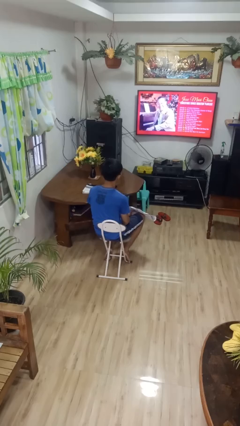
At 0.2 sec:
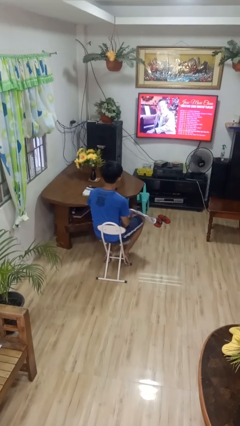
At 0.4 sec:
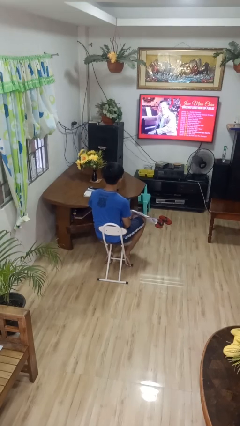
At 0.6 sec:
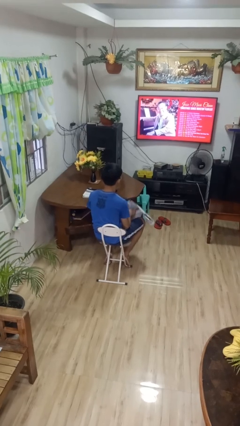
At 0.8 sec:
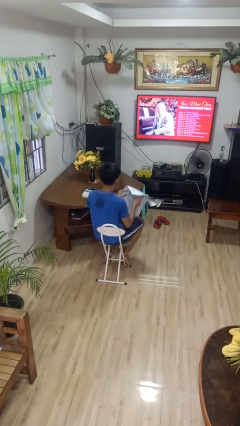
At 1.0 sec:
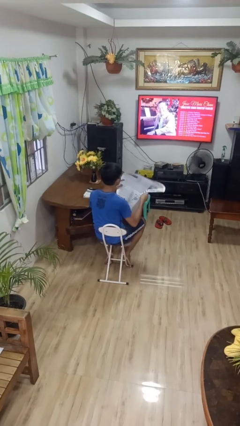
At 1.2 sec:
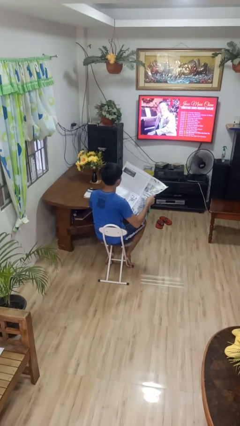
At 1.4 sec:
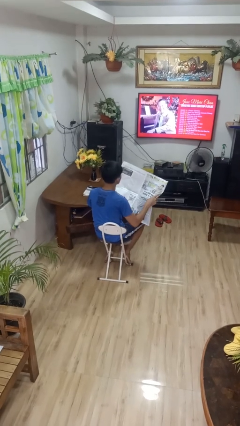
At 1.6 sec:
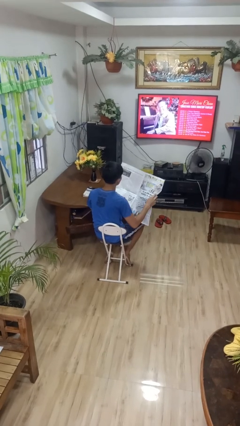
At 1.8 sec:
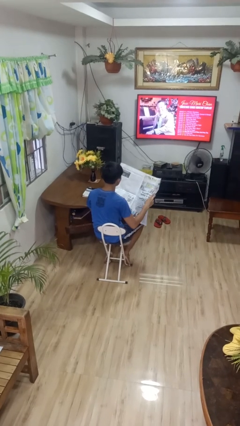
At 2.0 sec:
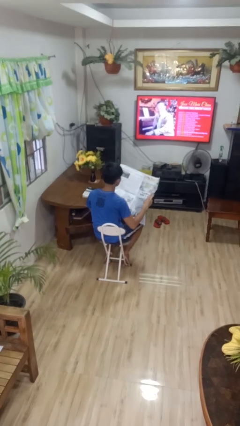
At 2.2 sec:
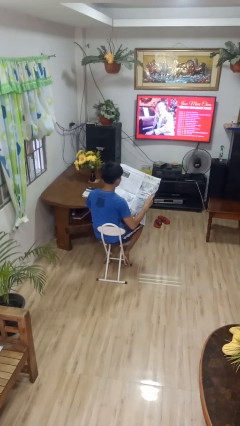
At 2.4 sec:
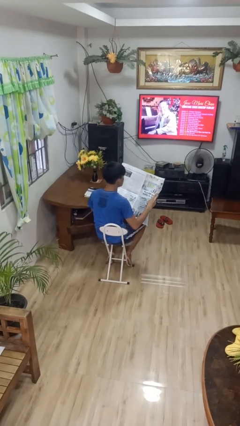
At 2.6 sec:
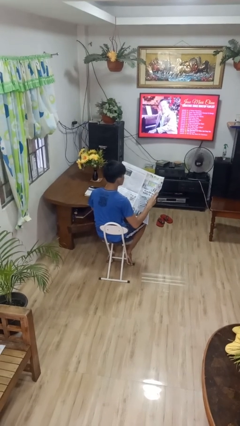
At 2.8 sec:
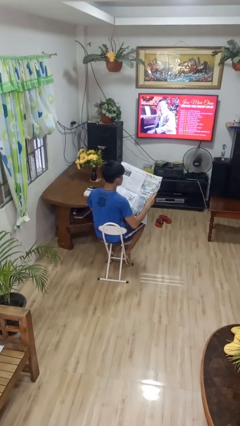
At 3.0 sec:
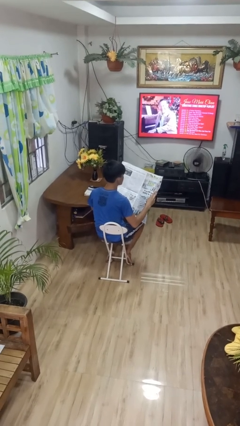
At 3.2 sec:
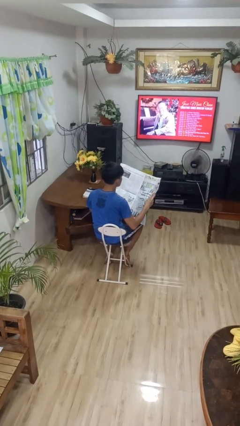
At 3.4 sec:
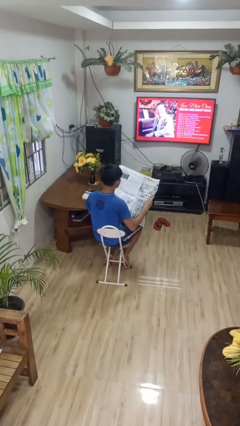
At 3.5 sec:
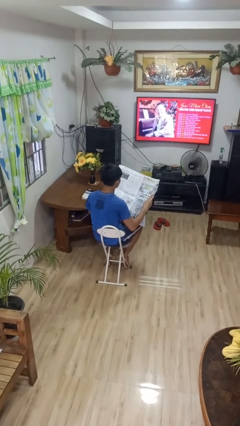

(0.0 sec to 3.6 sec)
person reads newspaper

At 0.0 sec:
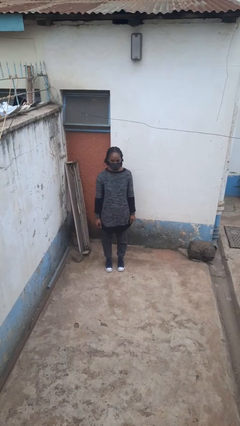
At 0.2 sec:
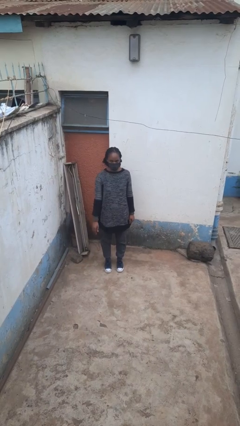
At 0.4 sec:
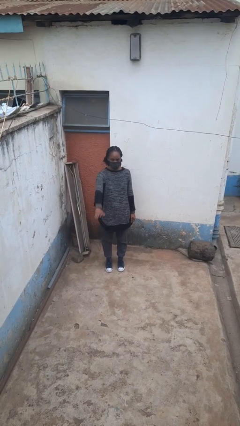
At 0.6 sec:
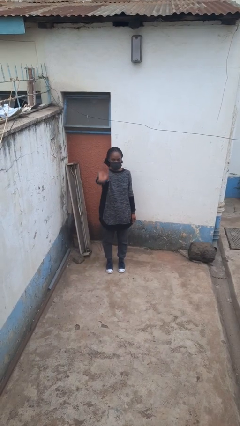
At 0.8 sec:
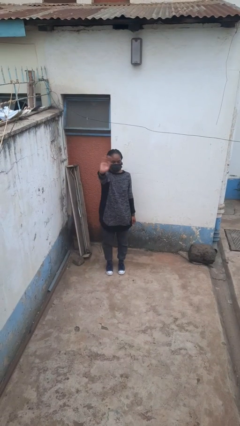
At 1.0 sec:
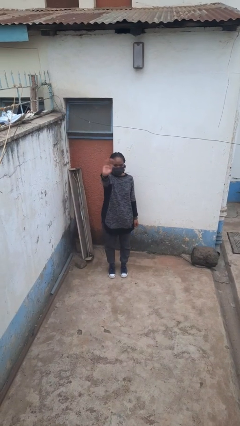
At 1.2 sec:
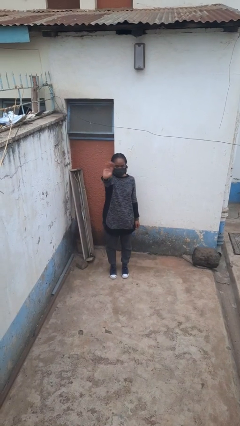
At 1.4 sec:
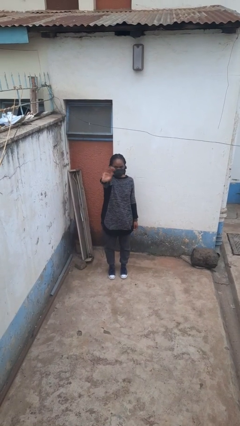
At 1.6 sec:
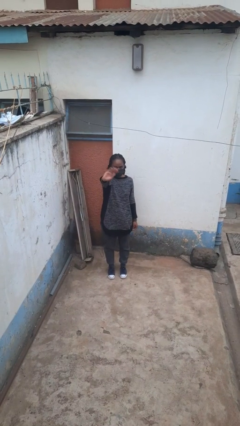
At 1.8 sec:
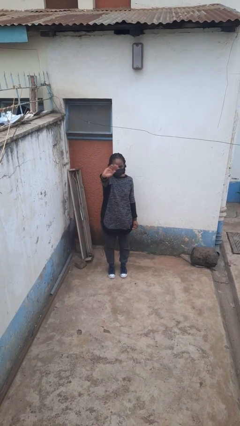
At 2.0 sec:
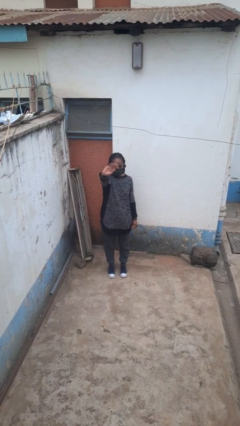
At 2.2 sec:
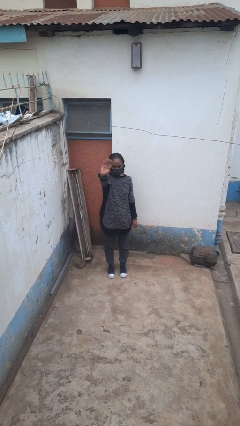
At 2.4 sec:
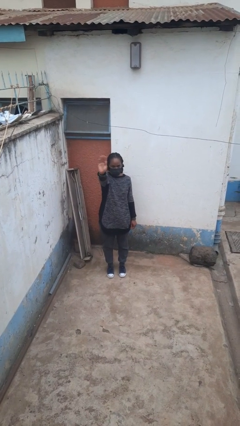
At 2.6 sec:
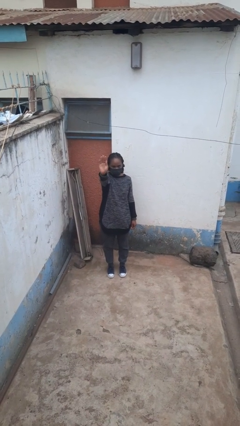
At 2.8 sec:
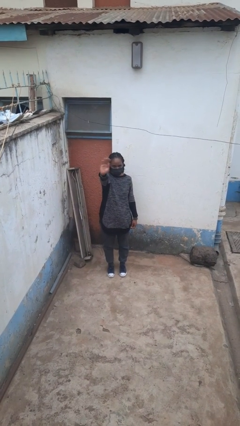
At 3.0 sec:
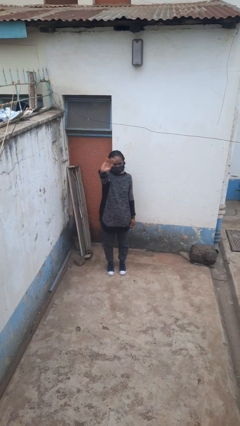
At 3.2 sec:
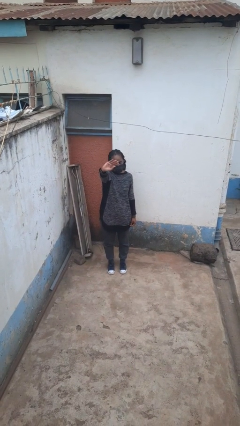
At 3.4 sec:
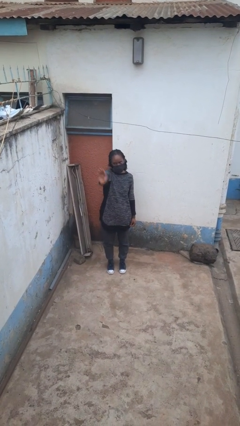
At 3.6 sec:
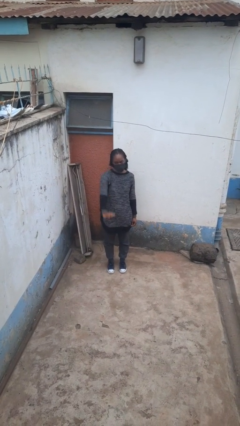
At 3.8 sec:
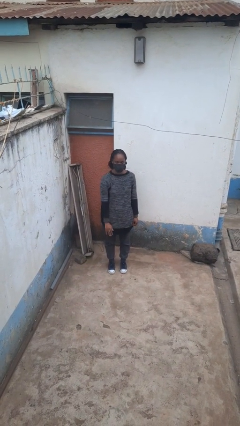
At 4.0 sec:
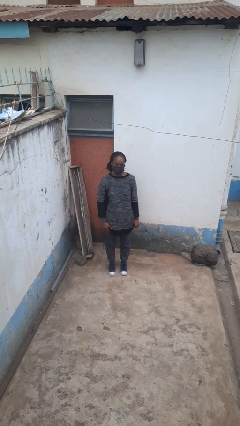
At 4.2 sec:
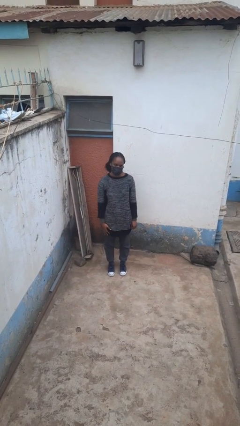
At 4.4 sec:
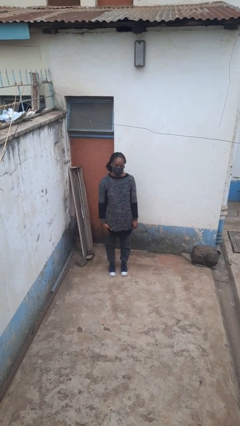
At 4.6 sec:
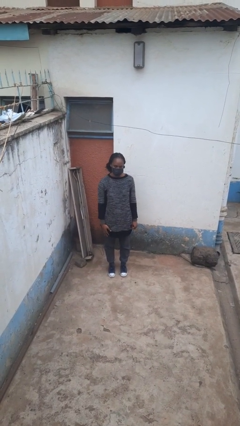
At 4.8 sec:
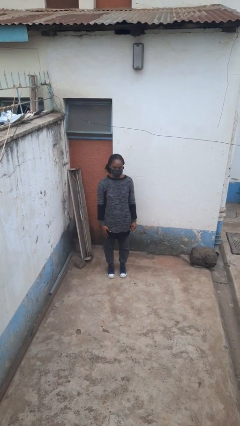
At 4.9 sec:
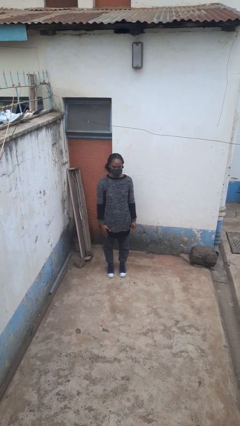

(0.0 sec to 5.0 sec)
person waves at person

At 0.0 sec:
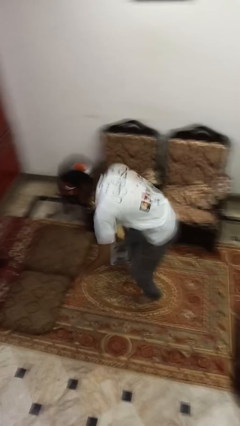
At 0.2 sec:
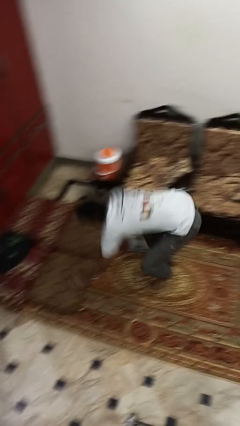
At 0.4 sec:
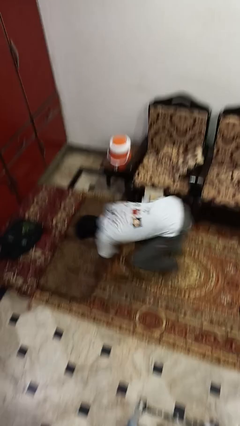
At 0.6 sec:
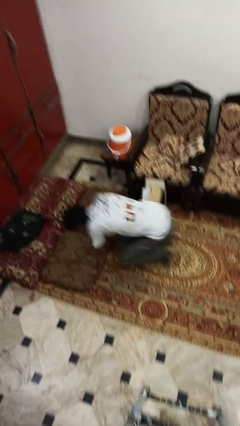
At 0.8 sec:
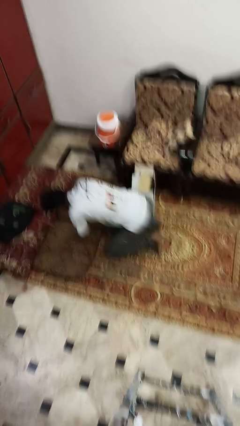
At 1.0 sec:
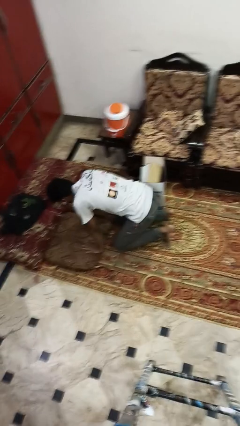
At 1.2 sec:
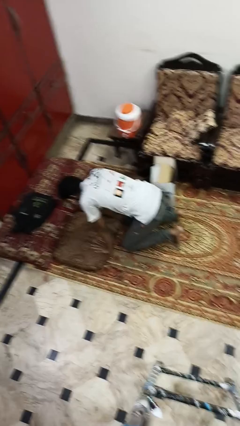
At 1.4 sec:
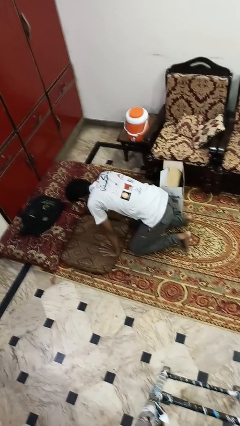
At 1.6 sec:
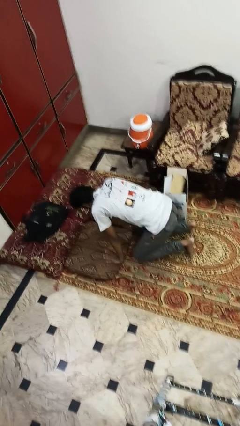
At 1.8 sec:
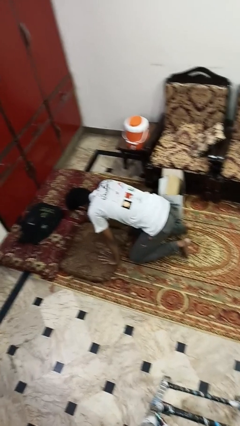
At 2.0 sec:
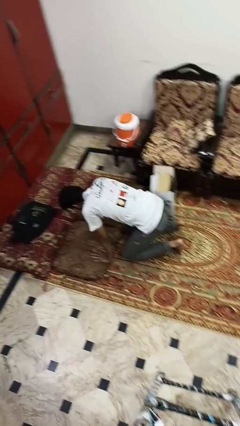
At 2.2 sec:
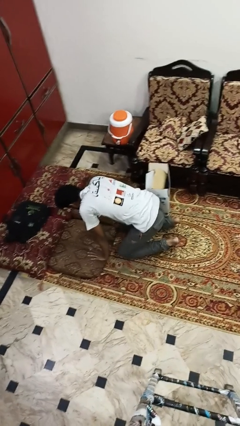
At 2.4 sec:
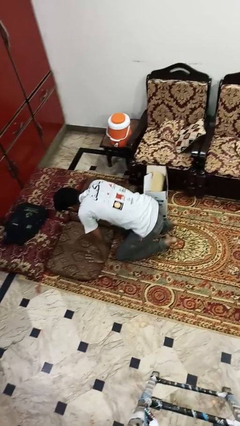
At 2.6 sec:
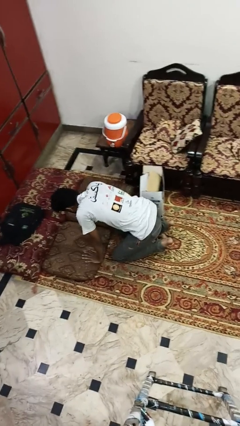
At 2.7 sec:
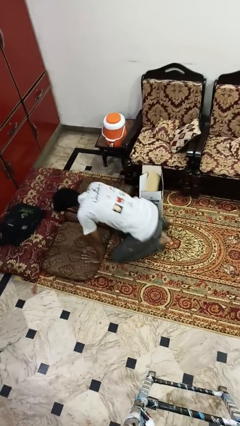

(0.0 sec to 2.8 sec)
person trips on object on floor

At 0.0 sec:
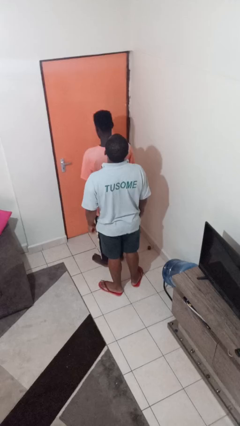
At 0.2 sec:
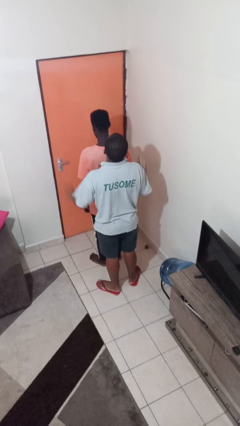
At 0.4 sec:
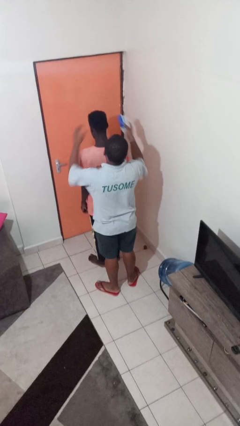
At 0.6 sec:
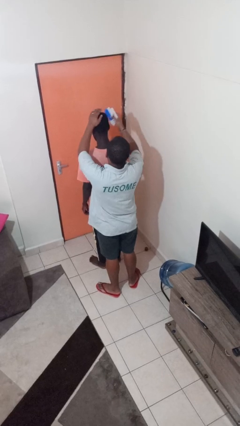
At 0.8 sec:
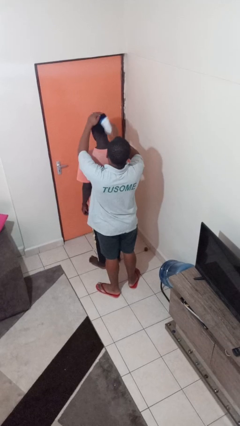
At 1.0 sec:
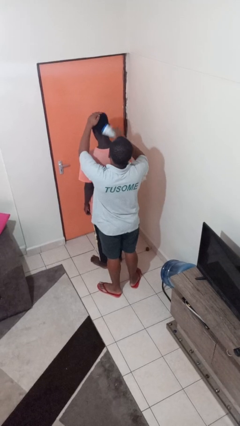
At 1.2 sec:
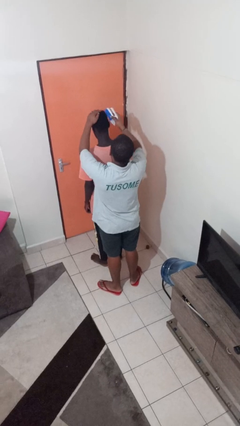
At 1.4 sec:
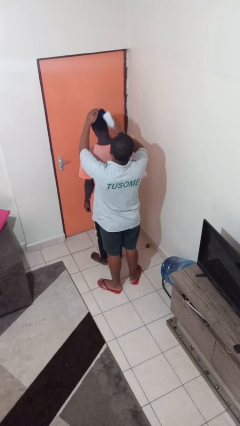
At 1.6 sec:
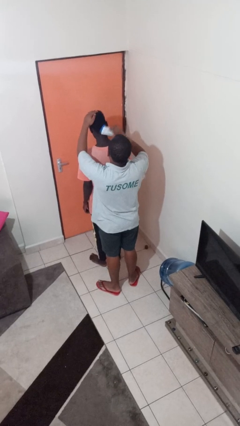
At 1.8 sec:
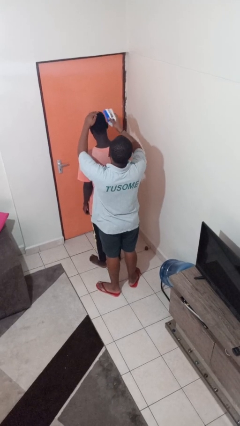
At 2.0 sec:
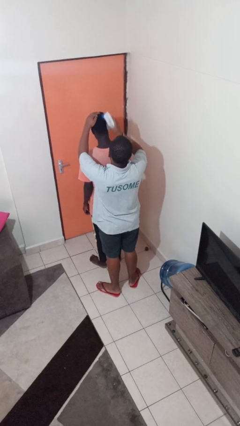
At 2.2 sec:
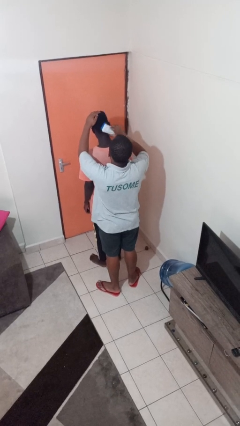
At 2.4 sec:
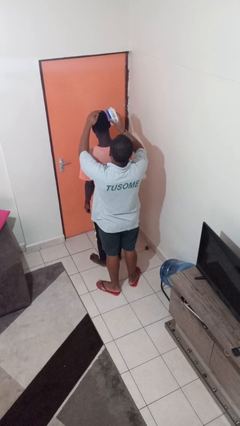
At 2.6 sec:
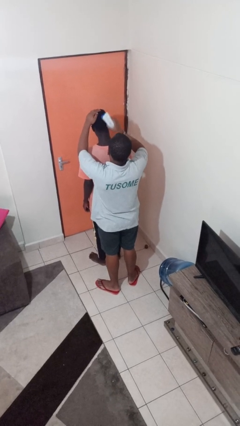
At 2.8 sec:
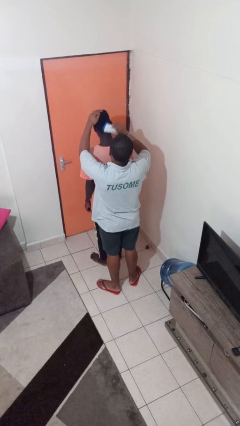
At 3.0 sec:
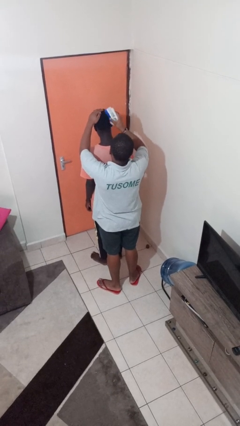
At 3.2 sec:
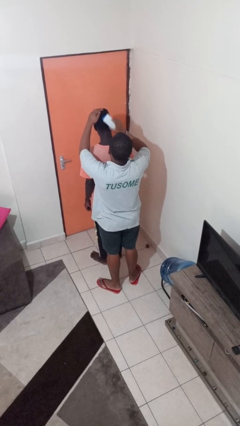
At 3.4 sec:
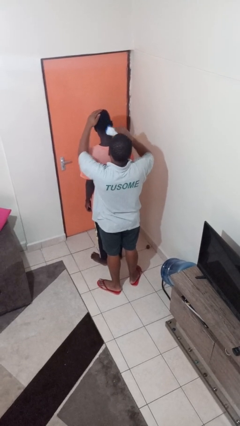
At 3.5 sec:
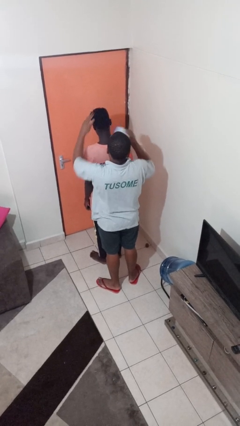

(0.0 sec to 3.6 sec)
person brushes hair of person

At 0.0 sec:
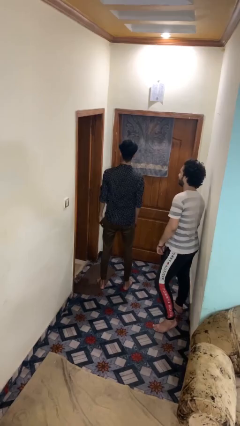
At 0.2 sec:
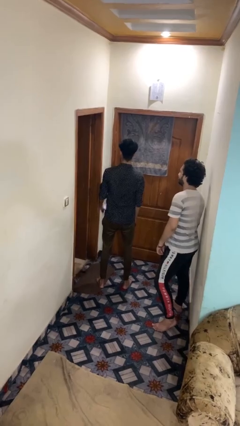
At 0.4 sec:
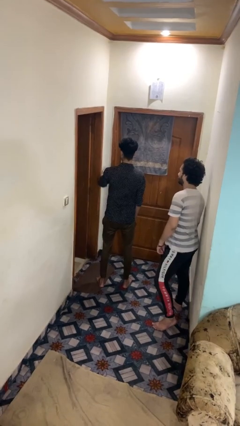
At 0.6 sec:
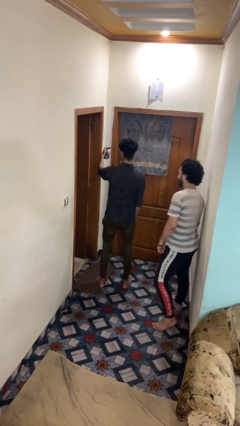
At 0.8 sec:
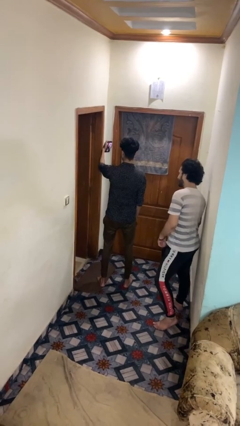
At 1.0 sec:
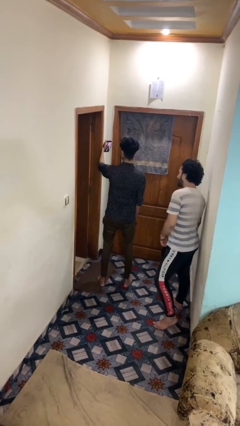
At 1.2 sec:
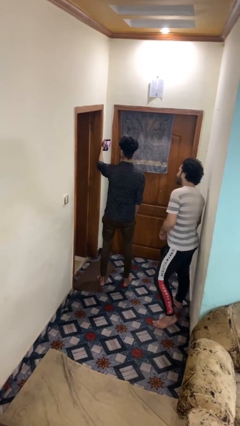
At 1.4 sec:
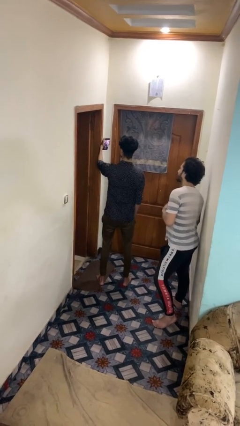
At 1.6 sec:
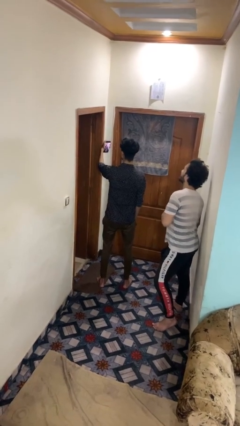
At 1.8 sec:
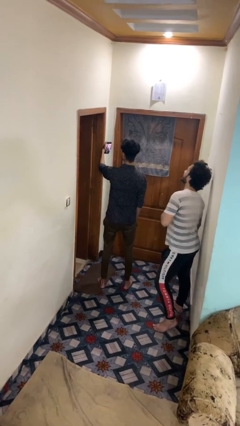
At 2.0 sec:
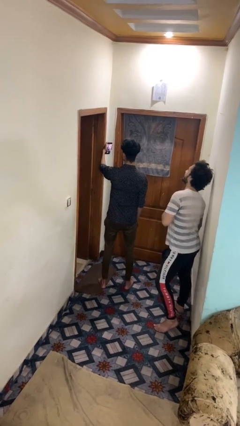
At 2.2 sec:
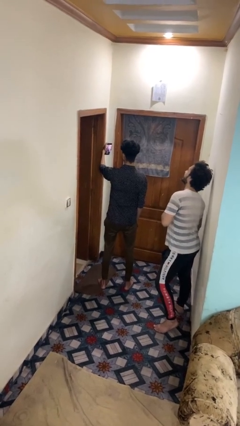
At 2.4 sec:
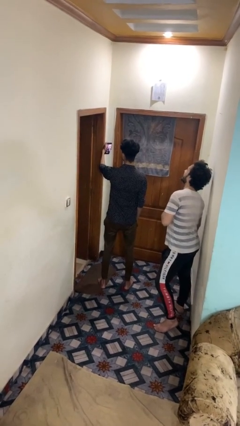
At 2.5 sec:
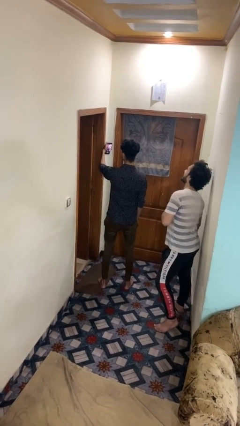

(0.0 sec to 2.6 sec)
person takes selfie with person
